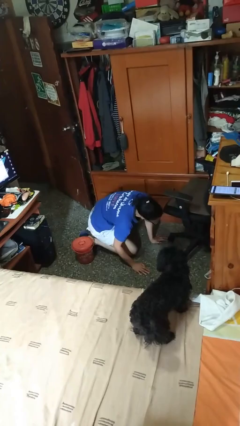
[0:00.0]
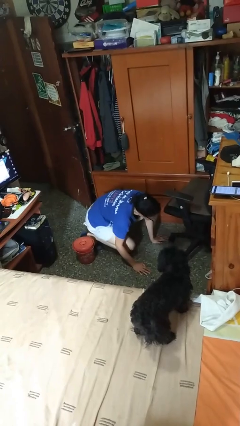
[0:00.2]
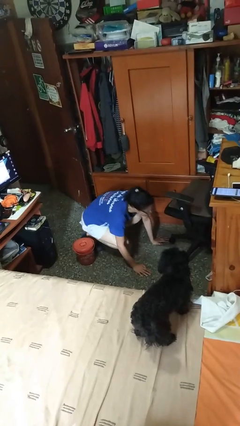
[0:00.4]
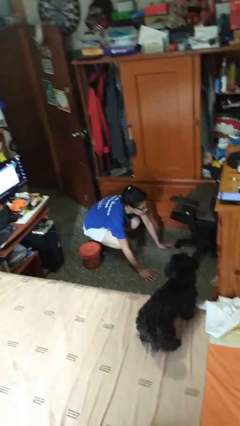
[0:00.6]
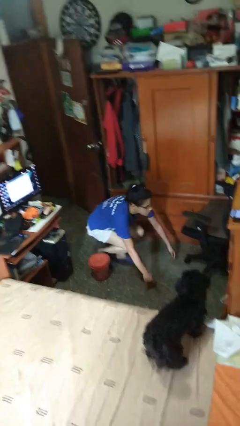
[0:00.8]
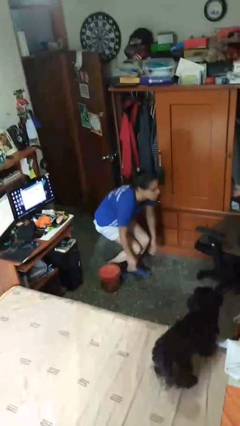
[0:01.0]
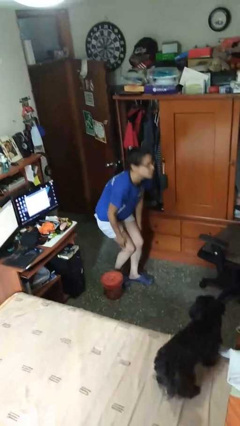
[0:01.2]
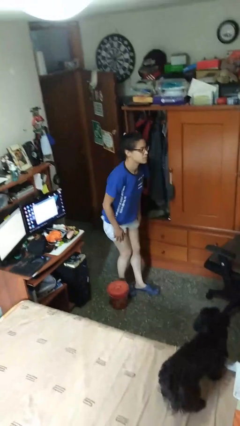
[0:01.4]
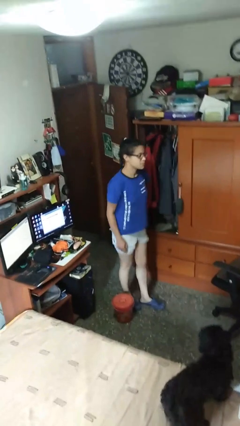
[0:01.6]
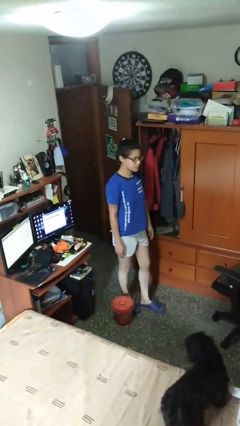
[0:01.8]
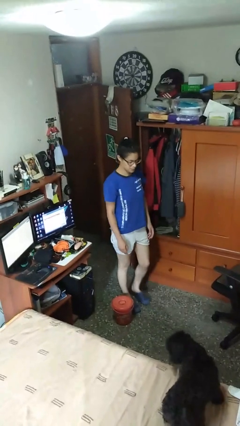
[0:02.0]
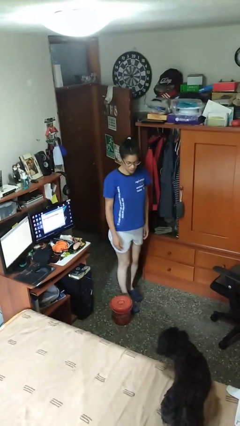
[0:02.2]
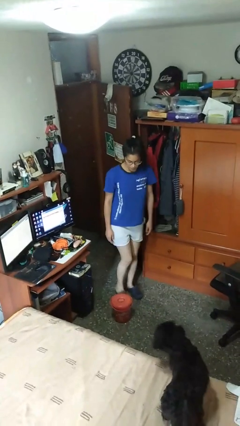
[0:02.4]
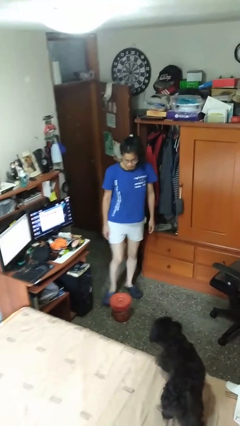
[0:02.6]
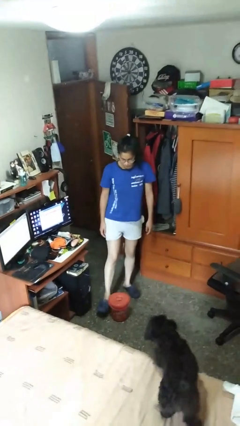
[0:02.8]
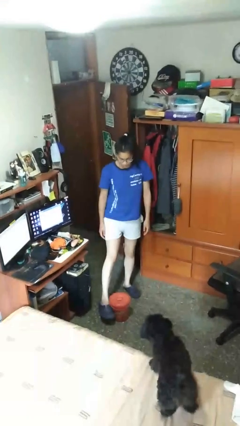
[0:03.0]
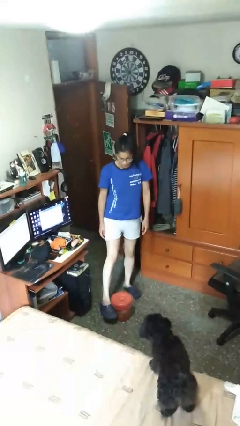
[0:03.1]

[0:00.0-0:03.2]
person stands up from floor

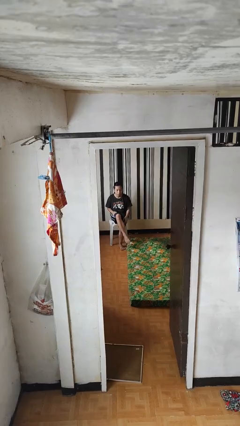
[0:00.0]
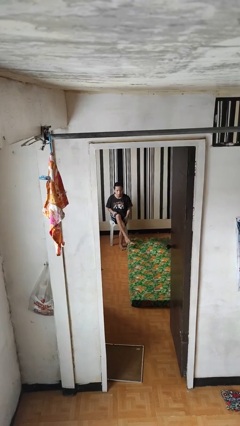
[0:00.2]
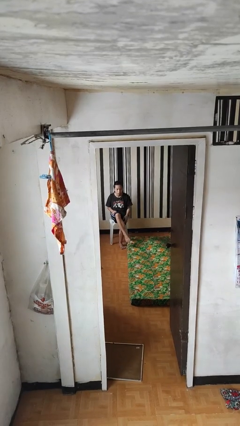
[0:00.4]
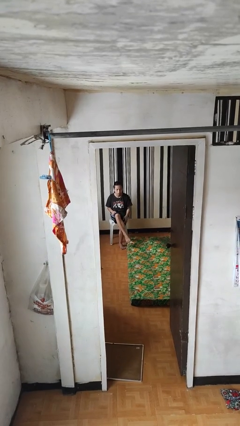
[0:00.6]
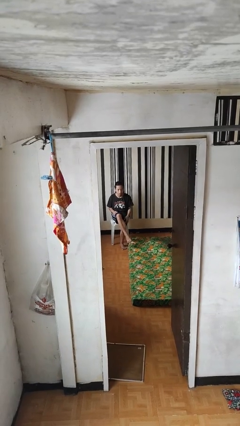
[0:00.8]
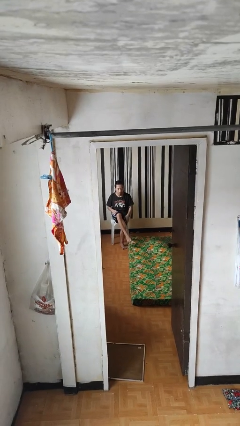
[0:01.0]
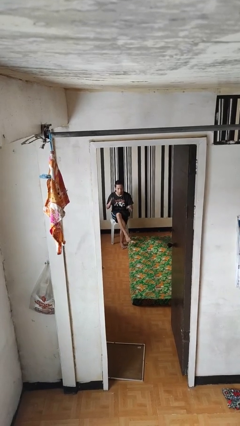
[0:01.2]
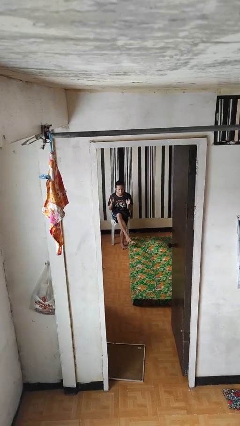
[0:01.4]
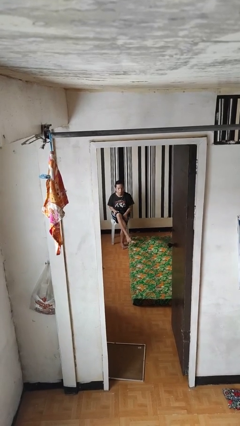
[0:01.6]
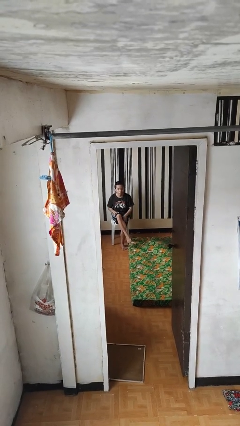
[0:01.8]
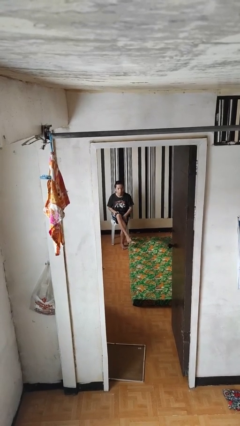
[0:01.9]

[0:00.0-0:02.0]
person slaps hands on thighs

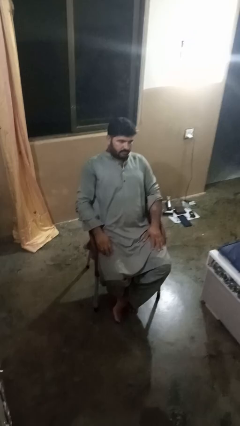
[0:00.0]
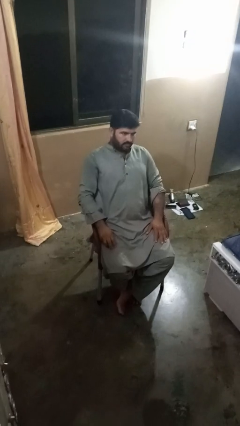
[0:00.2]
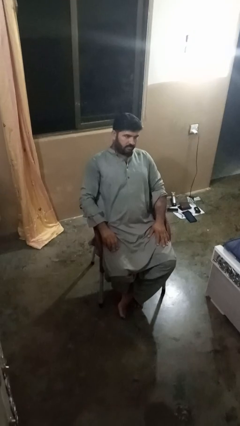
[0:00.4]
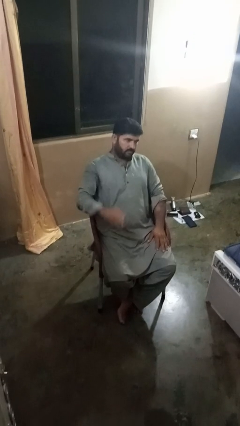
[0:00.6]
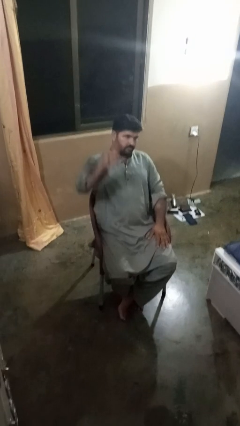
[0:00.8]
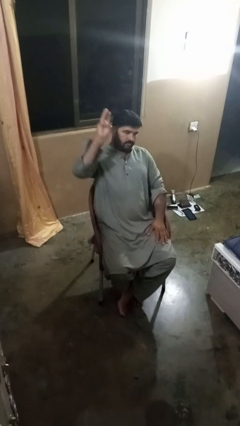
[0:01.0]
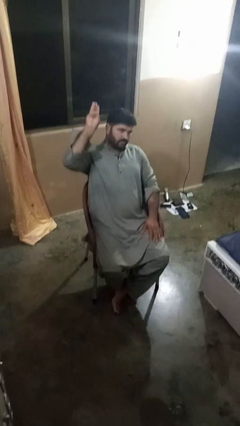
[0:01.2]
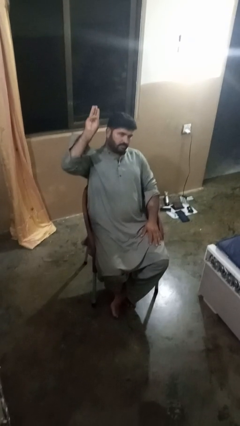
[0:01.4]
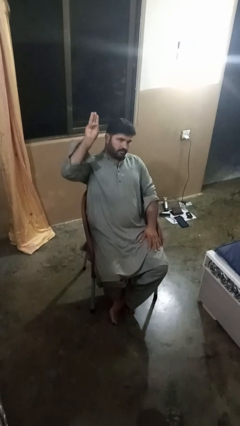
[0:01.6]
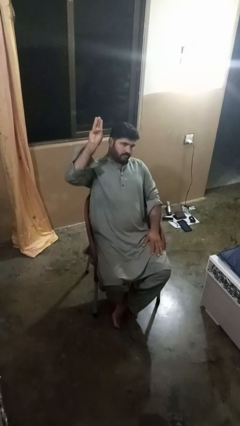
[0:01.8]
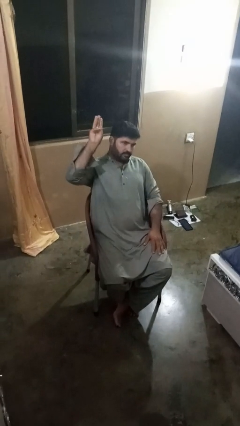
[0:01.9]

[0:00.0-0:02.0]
person gestures number three

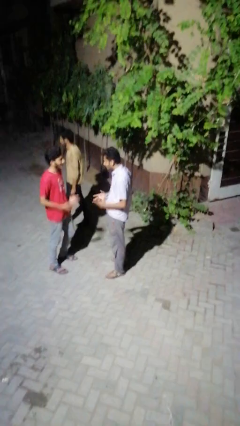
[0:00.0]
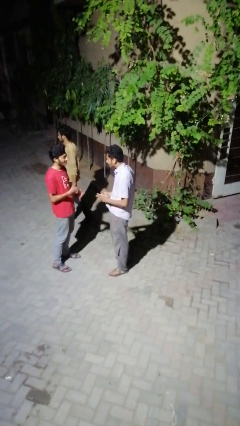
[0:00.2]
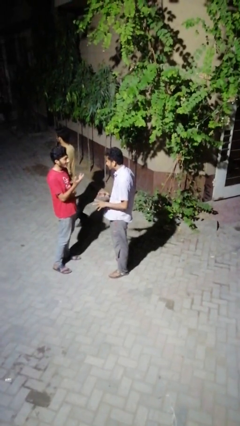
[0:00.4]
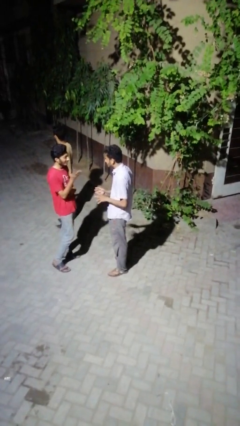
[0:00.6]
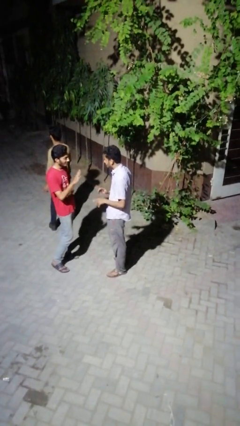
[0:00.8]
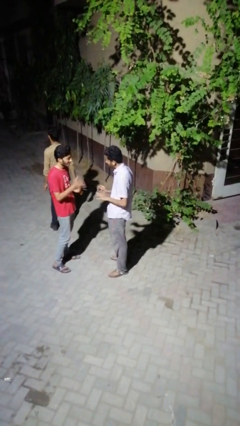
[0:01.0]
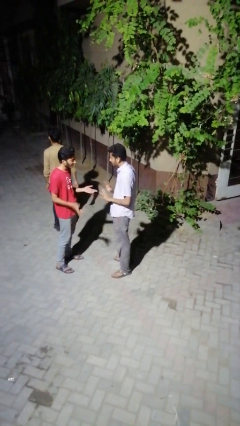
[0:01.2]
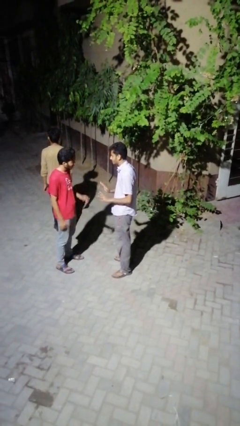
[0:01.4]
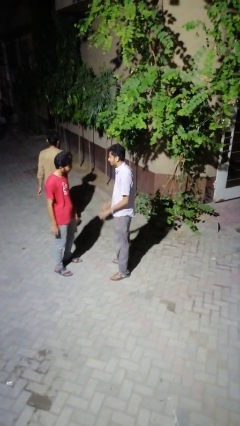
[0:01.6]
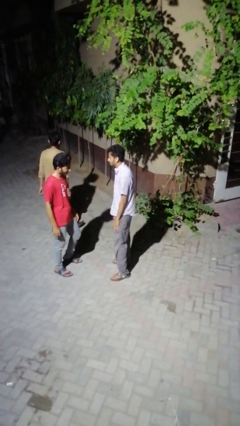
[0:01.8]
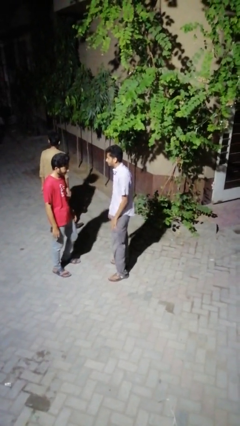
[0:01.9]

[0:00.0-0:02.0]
person talks to person

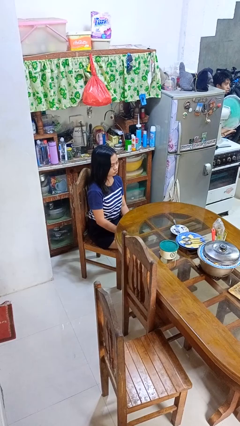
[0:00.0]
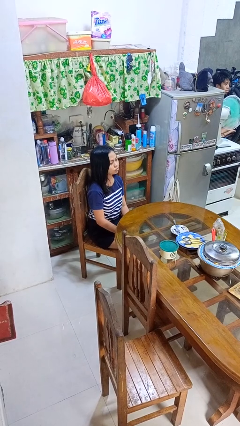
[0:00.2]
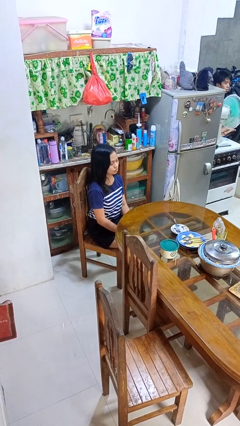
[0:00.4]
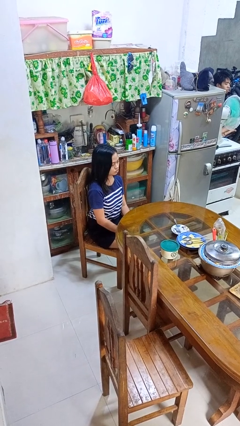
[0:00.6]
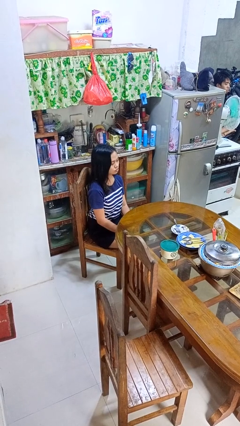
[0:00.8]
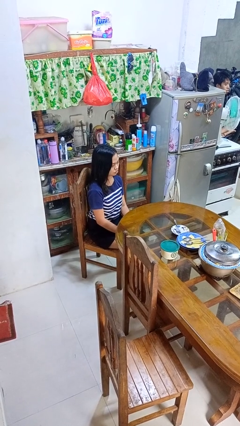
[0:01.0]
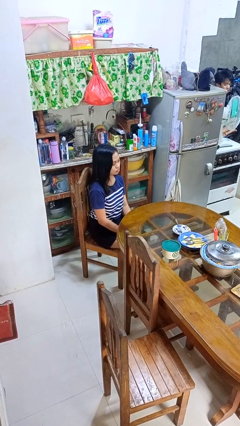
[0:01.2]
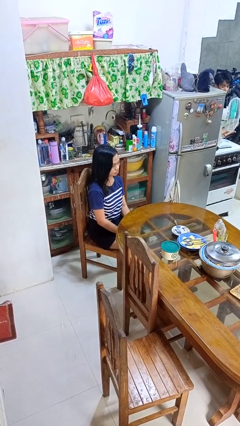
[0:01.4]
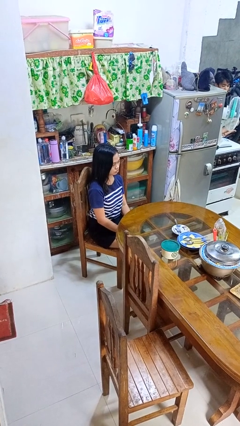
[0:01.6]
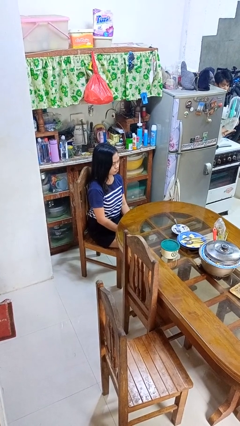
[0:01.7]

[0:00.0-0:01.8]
person nods head

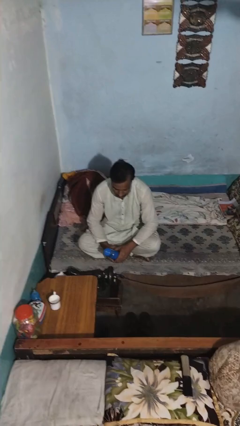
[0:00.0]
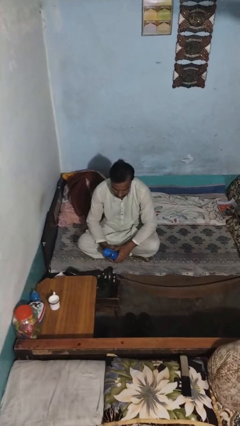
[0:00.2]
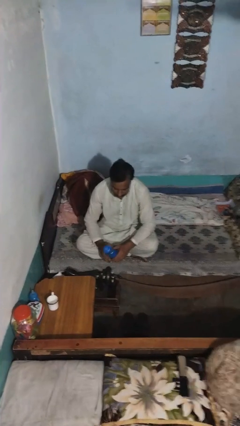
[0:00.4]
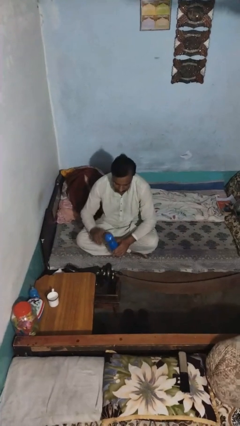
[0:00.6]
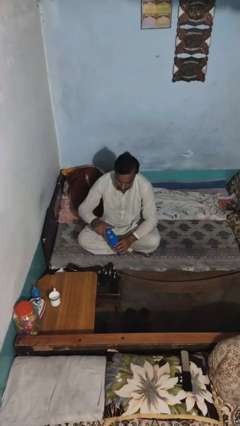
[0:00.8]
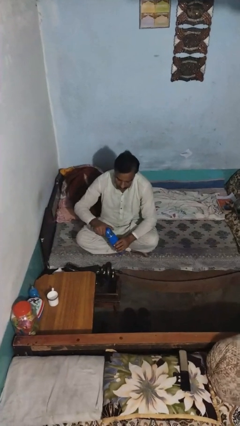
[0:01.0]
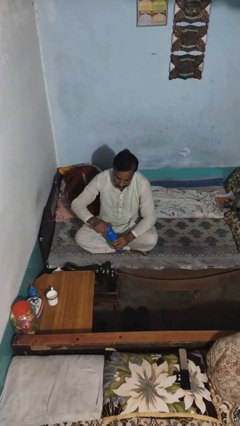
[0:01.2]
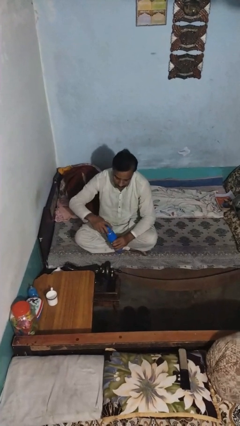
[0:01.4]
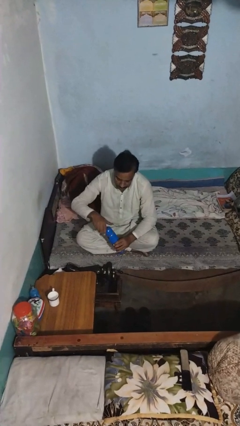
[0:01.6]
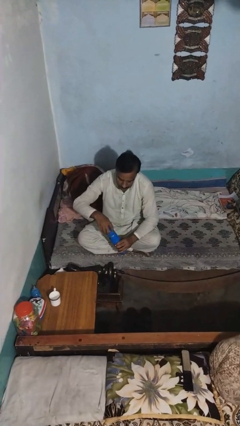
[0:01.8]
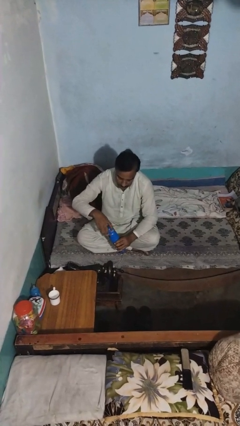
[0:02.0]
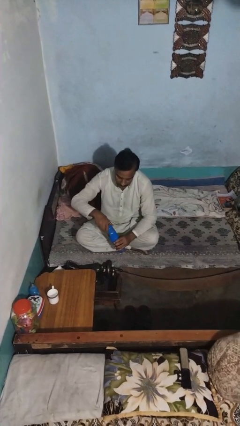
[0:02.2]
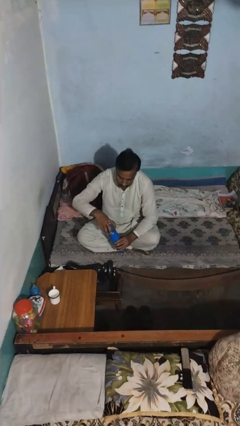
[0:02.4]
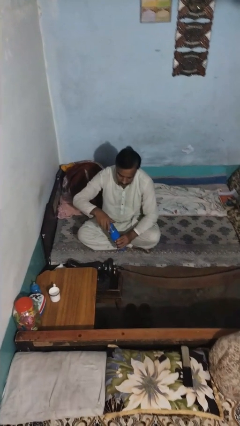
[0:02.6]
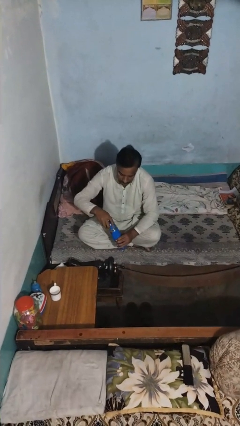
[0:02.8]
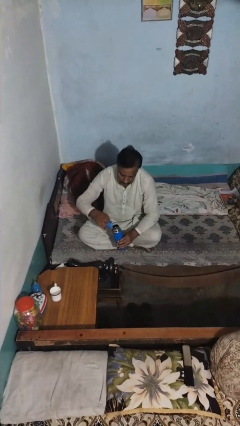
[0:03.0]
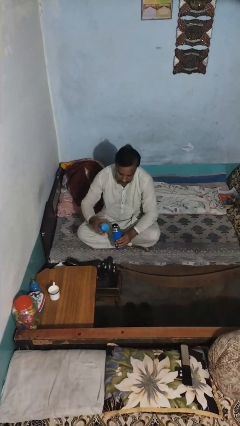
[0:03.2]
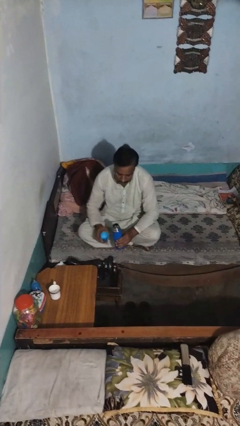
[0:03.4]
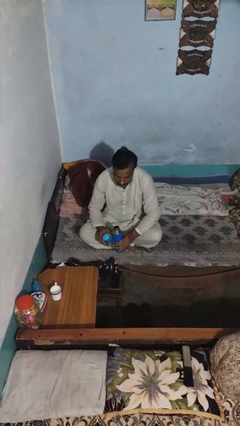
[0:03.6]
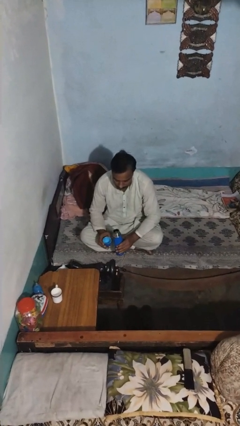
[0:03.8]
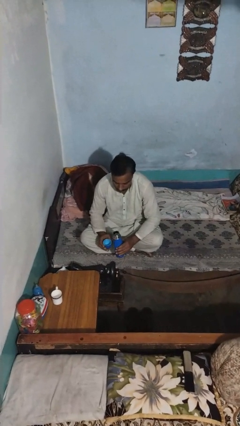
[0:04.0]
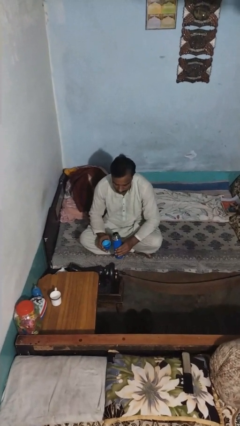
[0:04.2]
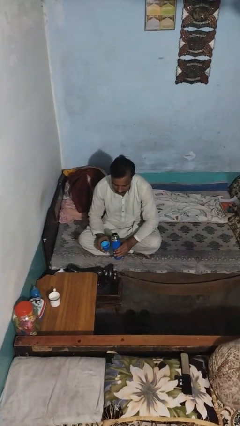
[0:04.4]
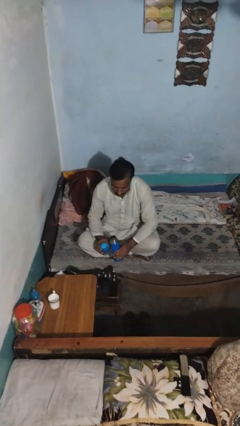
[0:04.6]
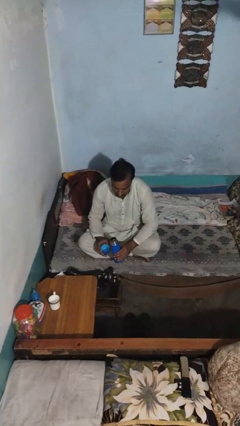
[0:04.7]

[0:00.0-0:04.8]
person unscrews lid from bottle

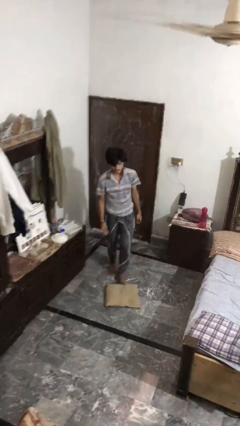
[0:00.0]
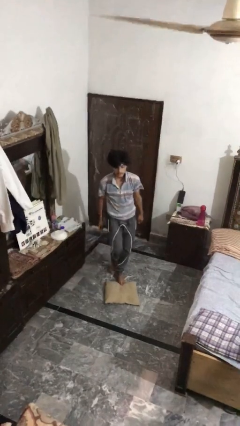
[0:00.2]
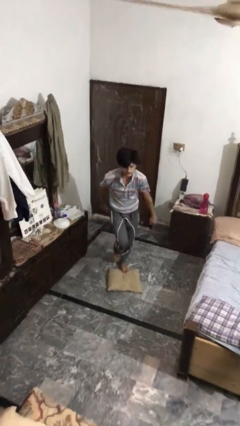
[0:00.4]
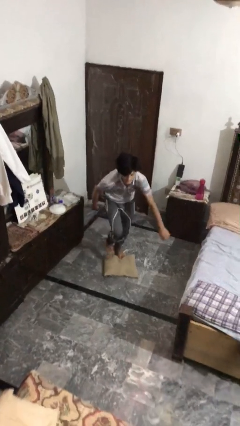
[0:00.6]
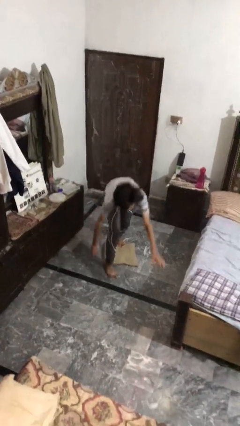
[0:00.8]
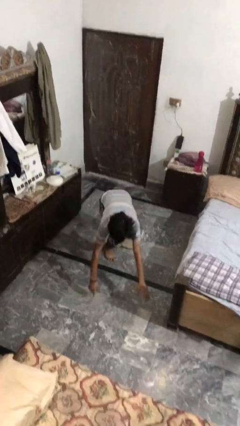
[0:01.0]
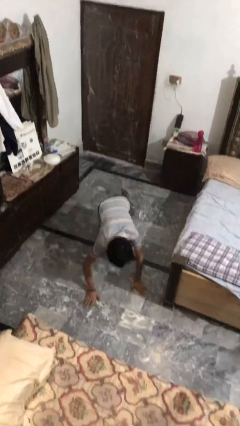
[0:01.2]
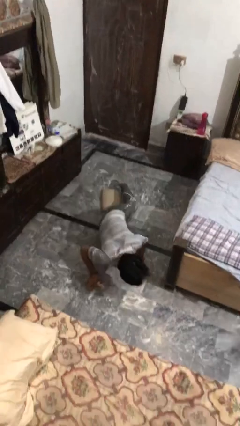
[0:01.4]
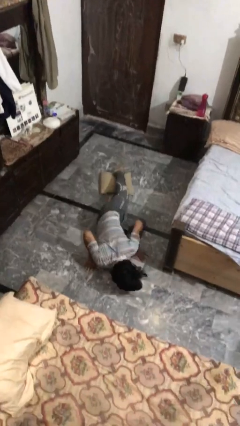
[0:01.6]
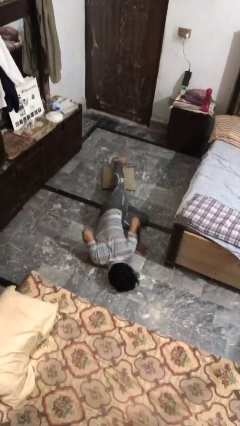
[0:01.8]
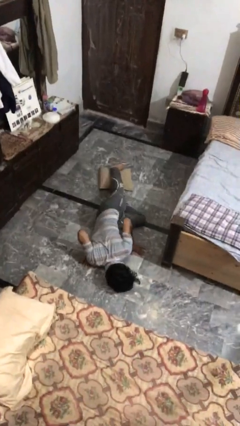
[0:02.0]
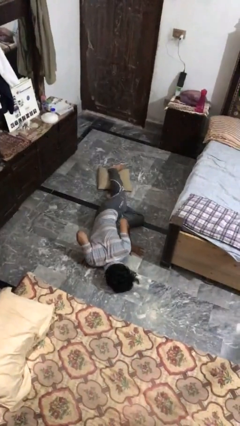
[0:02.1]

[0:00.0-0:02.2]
person trips on object on floor
